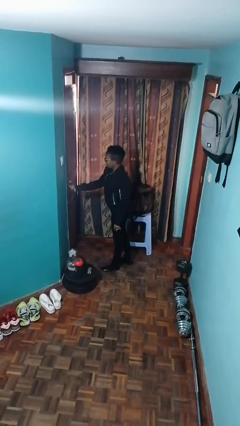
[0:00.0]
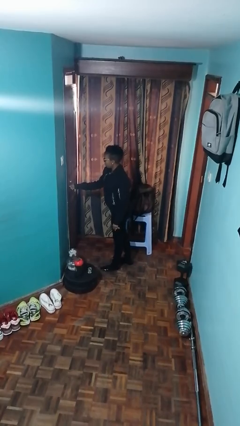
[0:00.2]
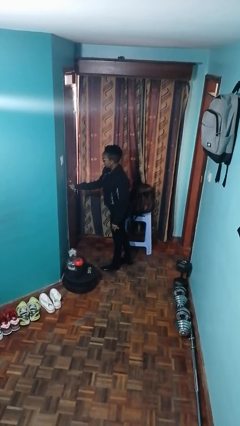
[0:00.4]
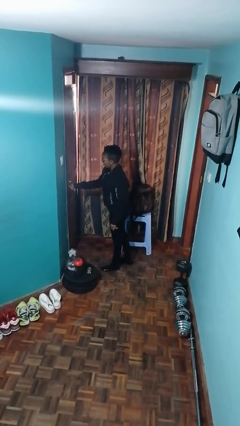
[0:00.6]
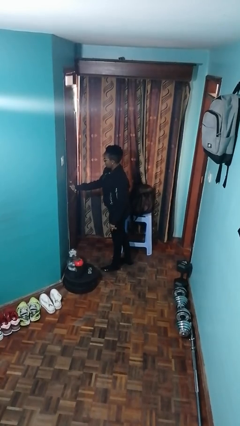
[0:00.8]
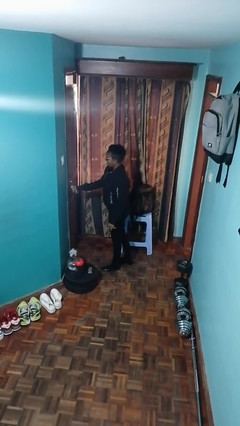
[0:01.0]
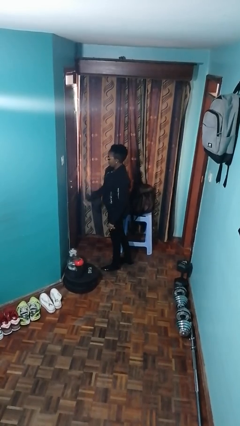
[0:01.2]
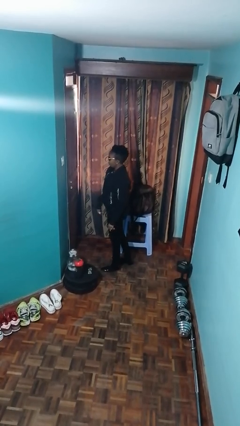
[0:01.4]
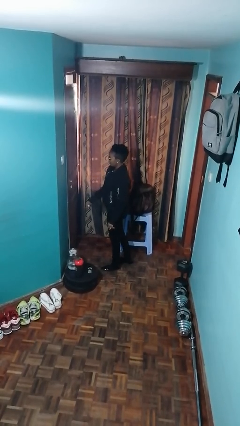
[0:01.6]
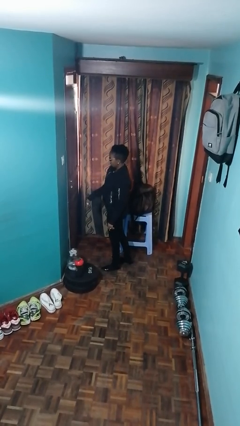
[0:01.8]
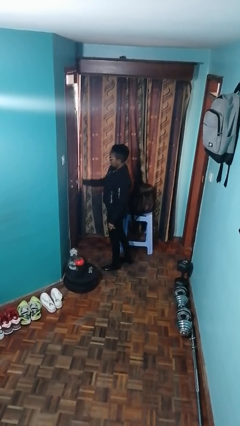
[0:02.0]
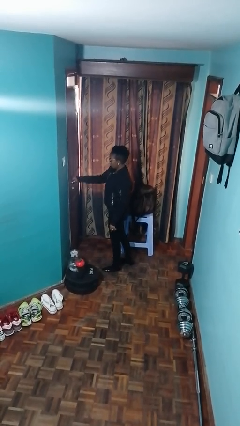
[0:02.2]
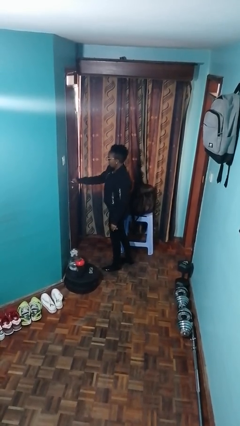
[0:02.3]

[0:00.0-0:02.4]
person unlocks door with keys

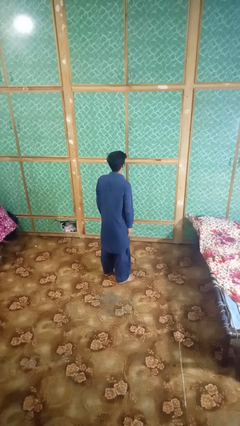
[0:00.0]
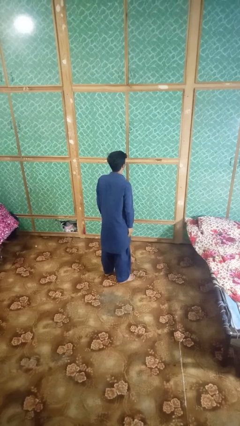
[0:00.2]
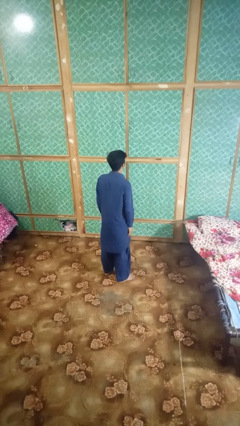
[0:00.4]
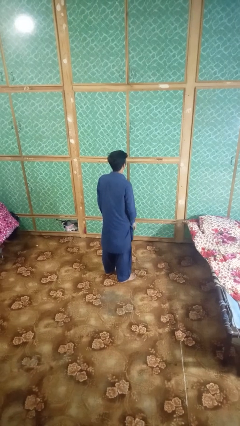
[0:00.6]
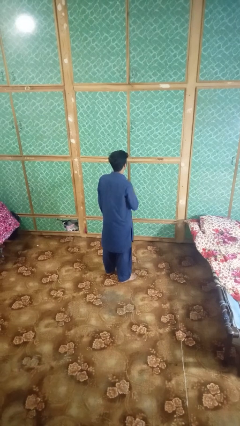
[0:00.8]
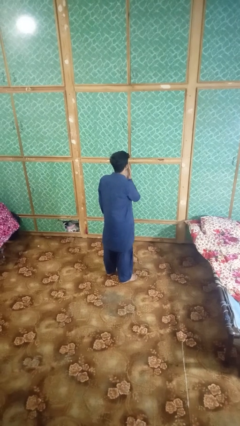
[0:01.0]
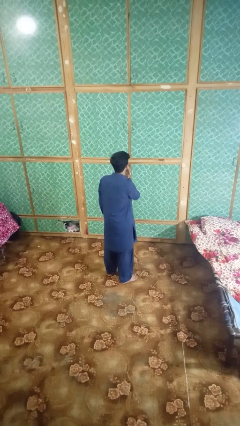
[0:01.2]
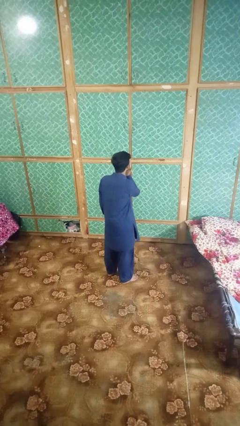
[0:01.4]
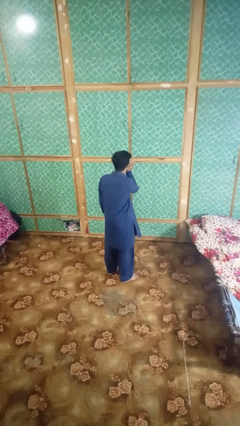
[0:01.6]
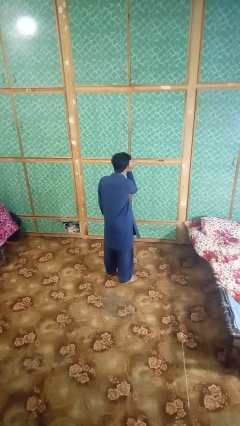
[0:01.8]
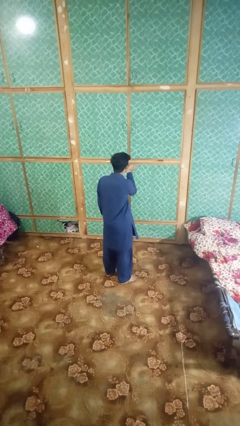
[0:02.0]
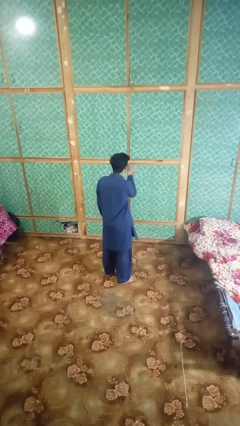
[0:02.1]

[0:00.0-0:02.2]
person gestures blow kiss

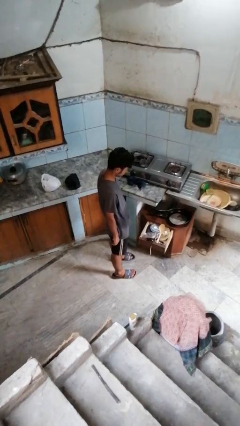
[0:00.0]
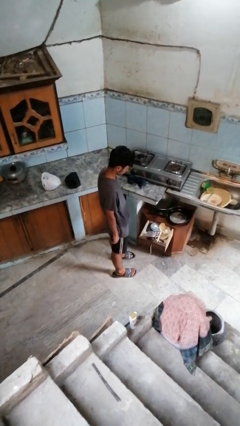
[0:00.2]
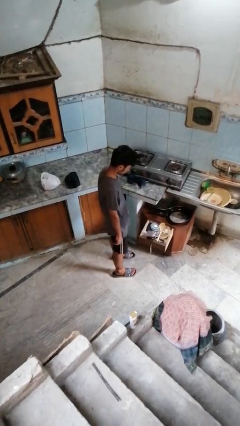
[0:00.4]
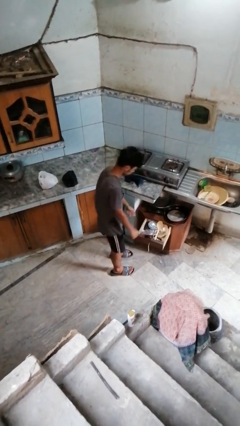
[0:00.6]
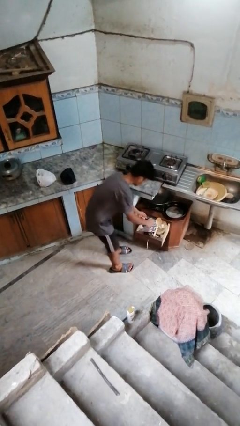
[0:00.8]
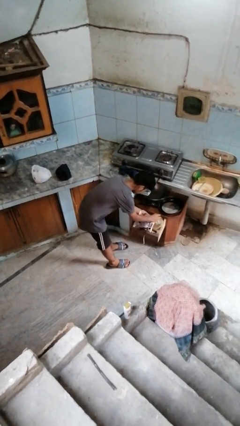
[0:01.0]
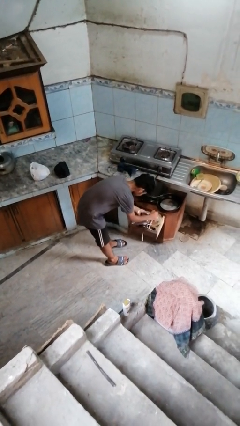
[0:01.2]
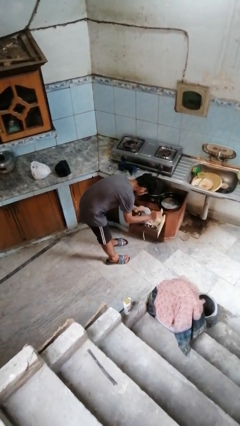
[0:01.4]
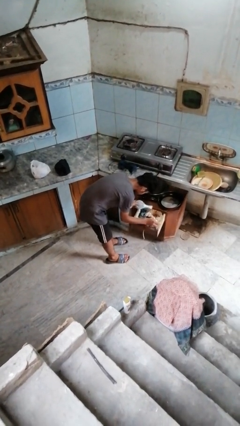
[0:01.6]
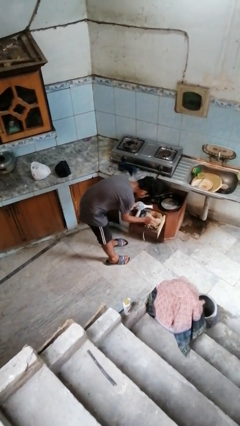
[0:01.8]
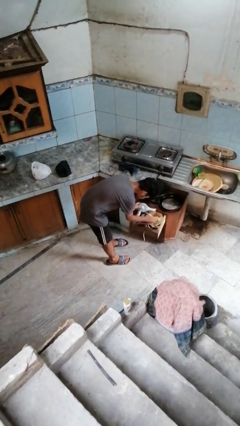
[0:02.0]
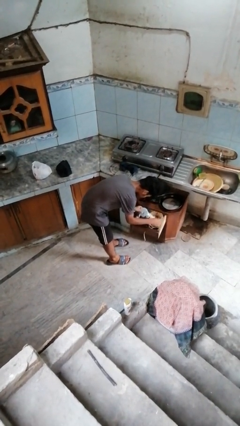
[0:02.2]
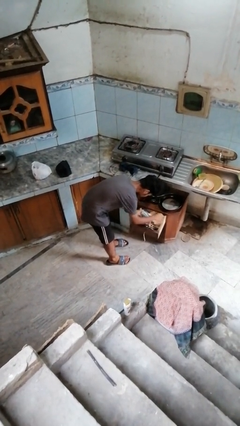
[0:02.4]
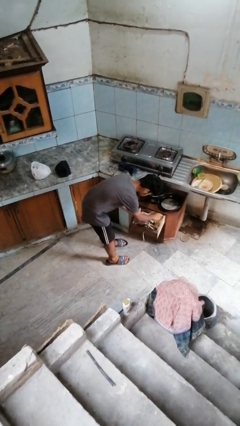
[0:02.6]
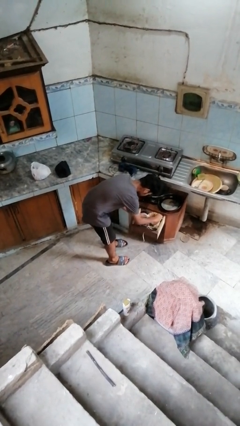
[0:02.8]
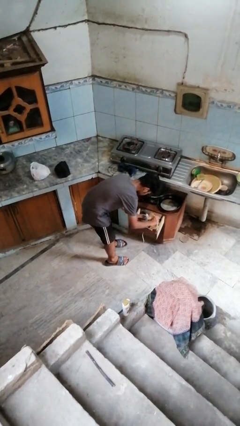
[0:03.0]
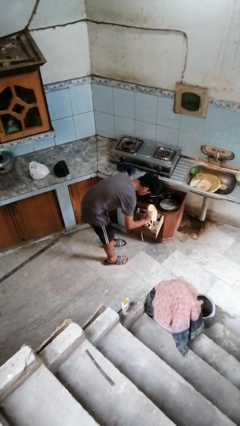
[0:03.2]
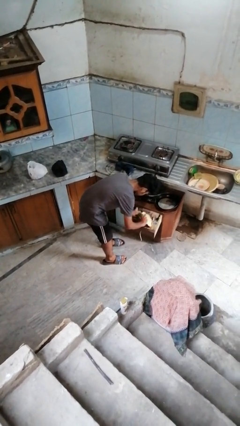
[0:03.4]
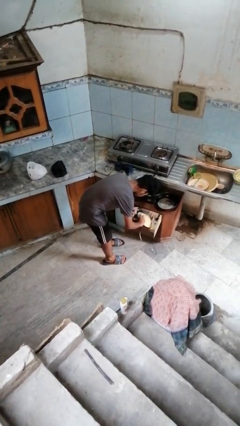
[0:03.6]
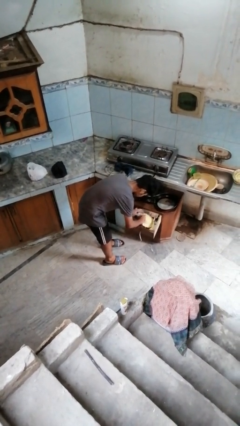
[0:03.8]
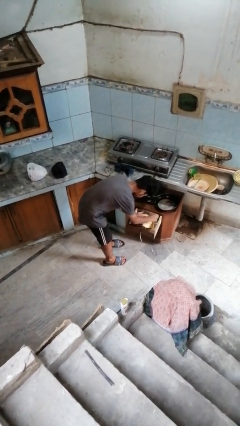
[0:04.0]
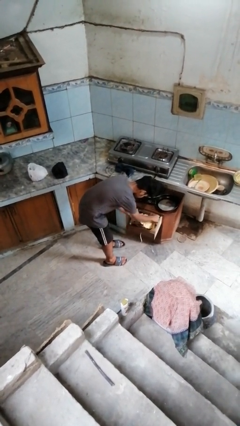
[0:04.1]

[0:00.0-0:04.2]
person searches in kitchen drawer

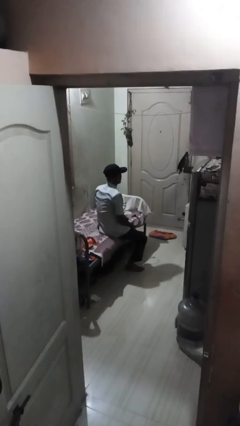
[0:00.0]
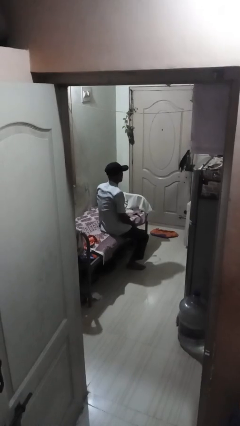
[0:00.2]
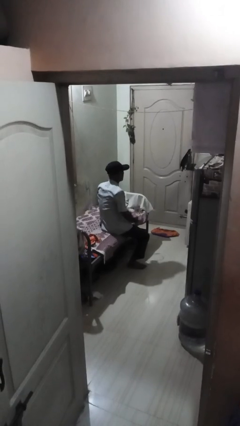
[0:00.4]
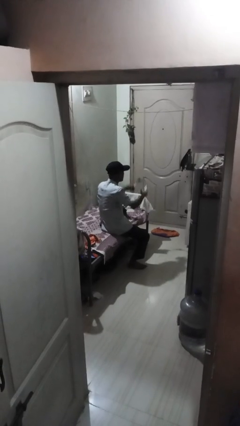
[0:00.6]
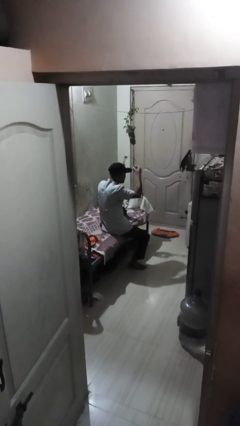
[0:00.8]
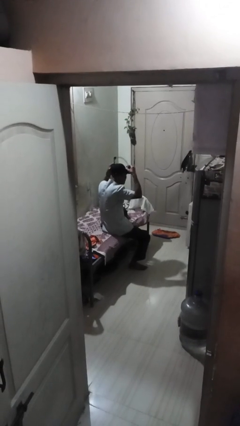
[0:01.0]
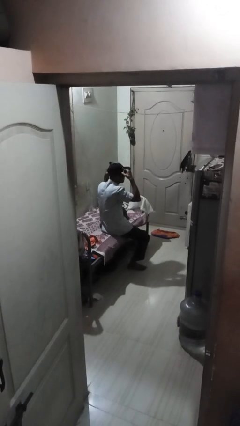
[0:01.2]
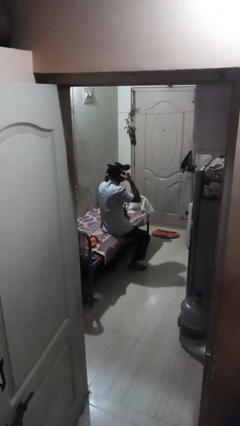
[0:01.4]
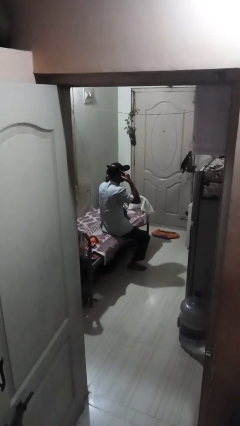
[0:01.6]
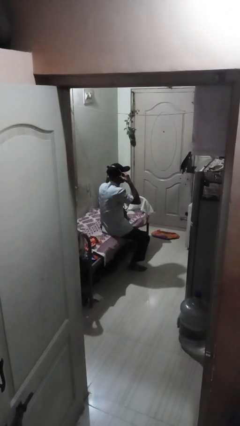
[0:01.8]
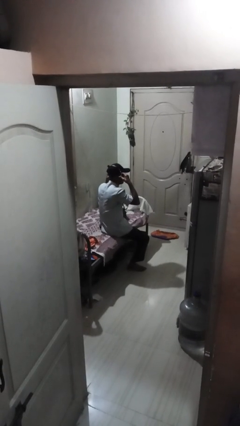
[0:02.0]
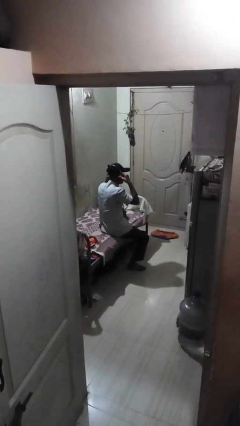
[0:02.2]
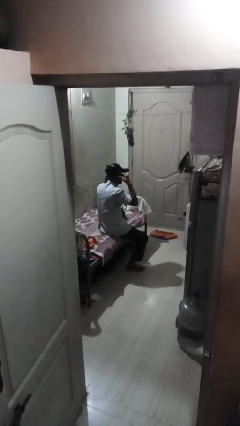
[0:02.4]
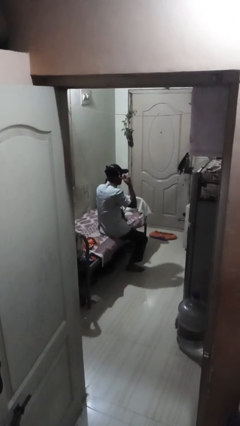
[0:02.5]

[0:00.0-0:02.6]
person puts on headphones

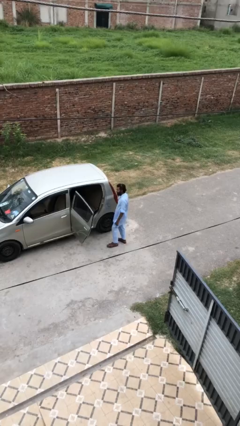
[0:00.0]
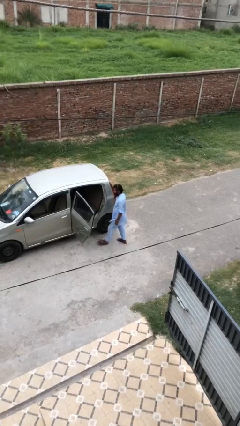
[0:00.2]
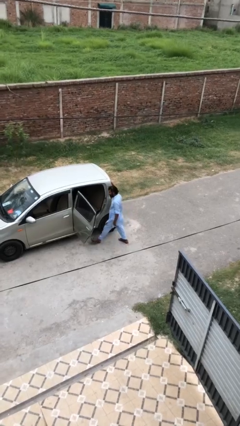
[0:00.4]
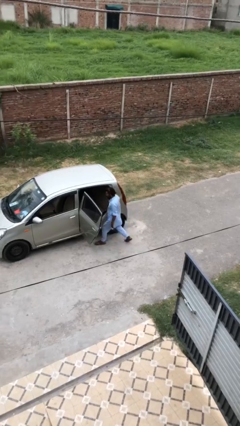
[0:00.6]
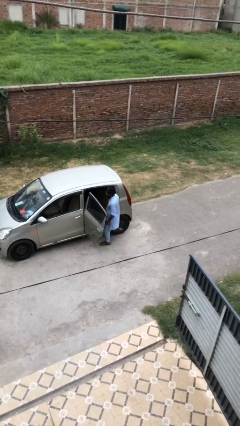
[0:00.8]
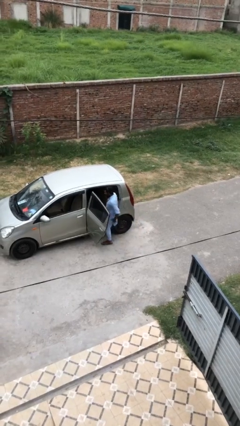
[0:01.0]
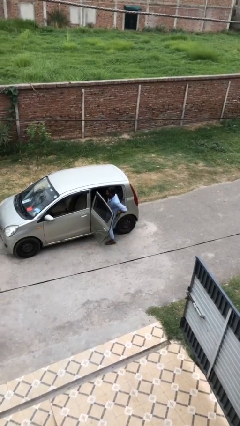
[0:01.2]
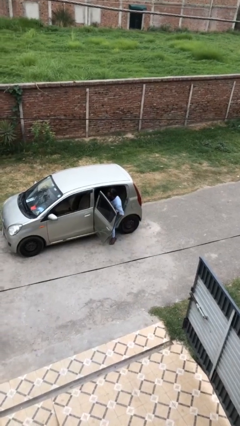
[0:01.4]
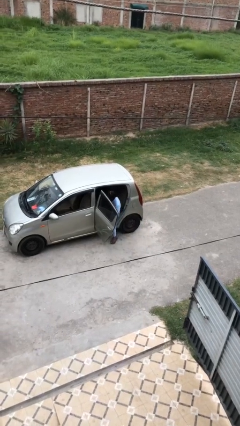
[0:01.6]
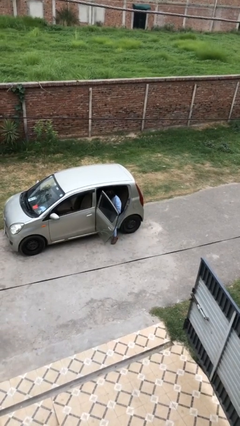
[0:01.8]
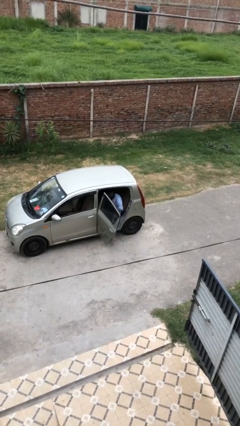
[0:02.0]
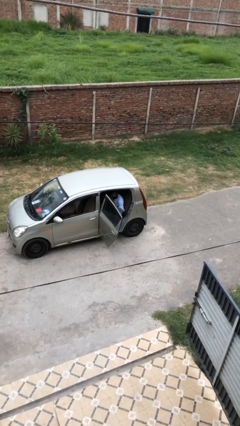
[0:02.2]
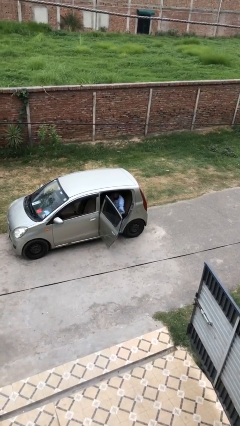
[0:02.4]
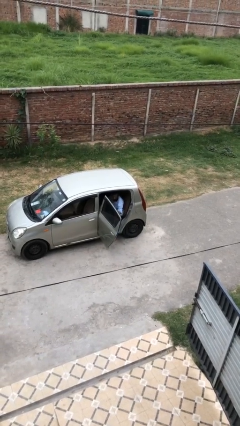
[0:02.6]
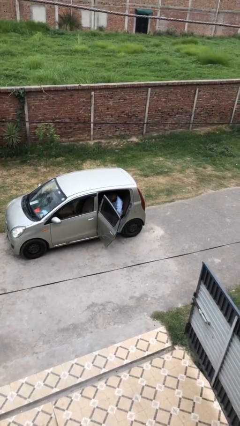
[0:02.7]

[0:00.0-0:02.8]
person enters car

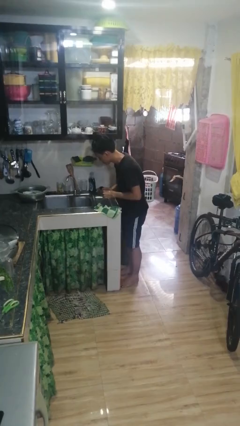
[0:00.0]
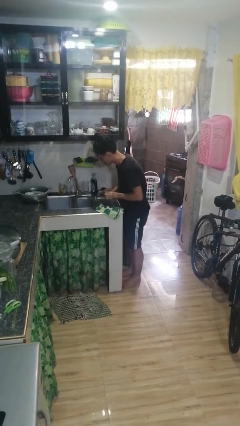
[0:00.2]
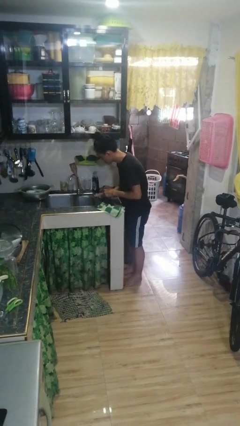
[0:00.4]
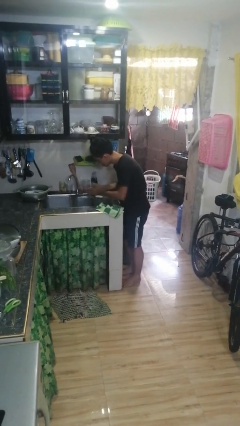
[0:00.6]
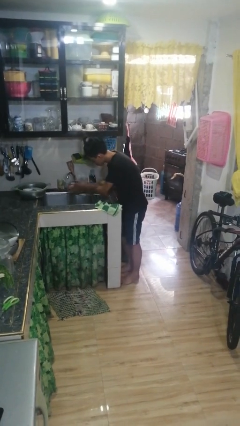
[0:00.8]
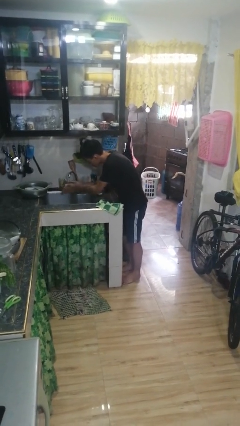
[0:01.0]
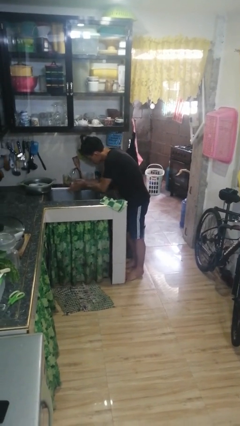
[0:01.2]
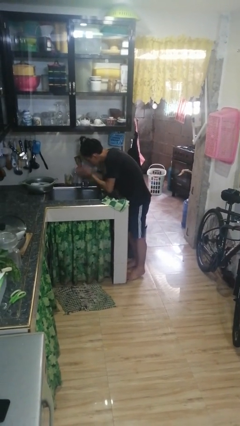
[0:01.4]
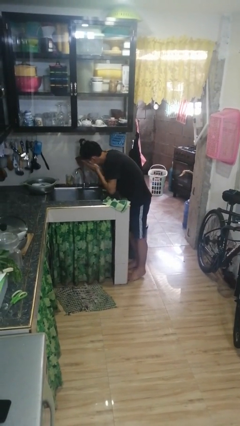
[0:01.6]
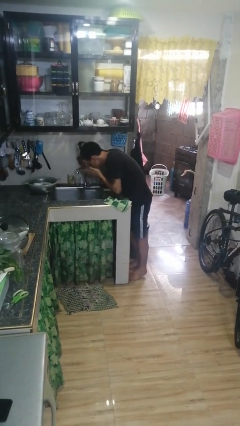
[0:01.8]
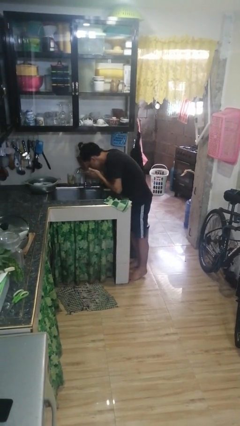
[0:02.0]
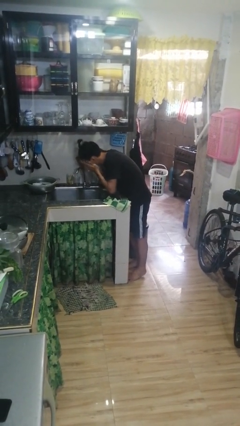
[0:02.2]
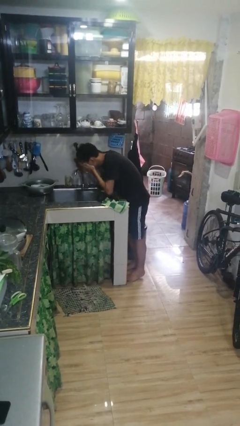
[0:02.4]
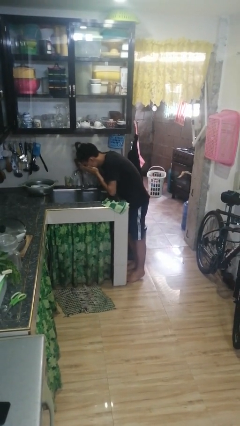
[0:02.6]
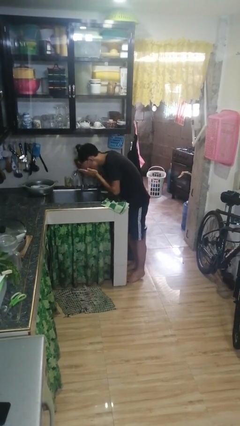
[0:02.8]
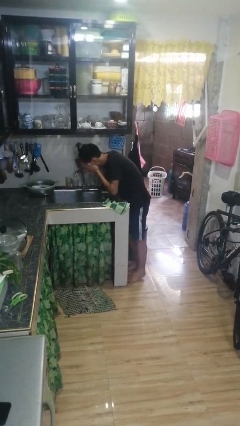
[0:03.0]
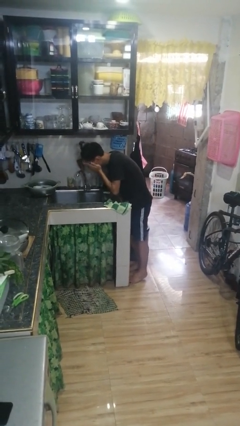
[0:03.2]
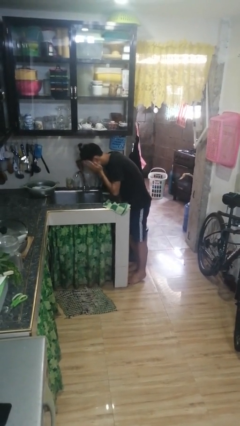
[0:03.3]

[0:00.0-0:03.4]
person washes face
